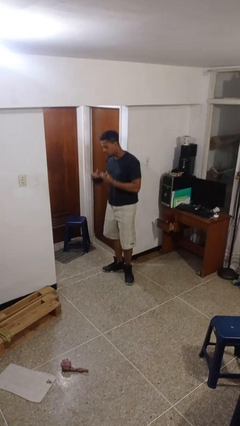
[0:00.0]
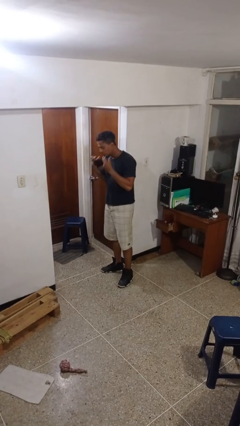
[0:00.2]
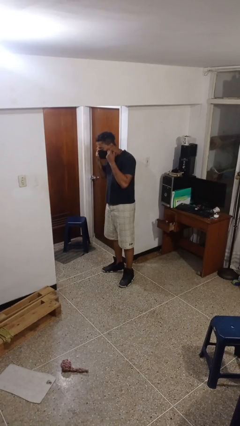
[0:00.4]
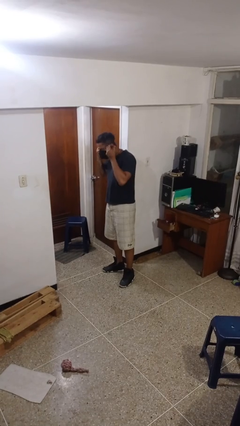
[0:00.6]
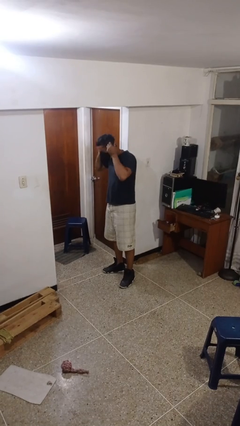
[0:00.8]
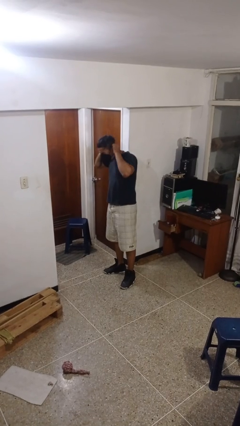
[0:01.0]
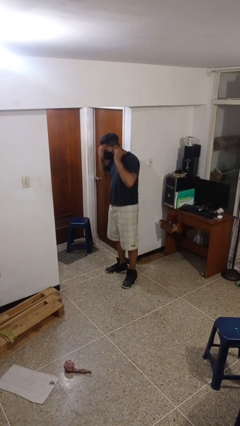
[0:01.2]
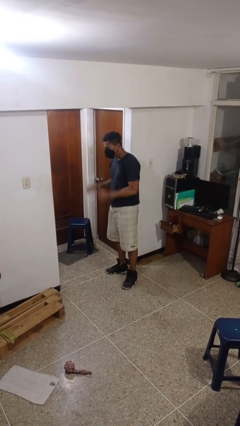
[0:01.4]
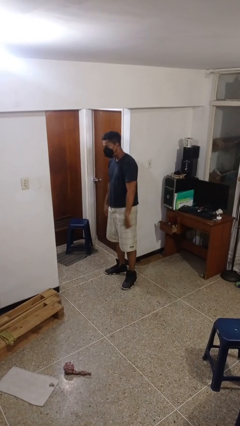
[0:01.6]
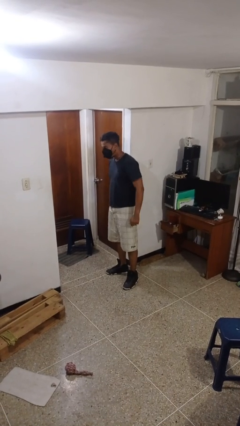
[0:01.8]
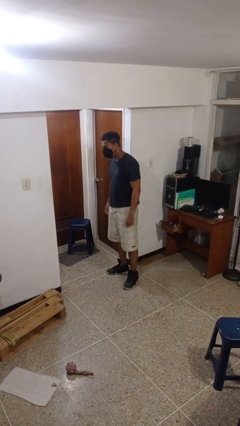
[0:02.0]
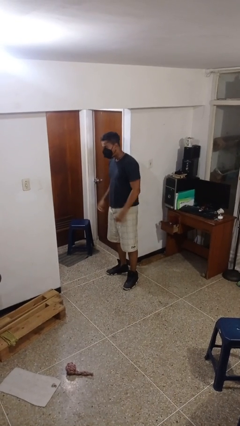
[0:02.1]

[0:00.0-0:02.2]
person puts on facemask

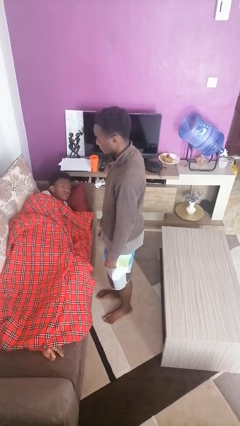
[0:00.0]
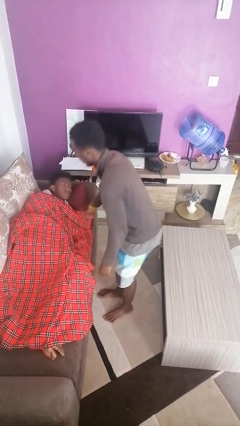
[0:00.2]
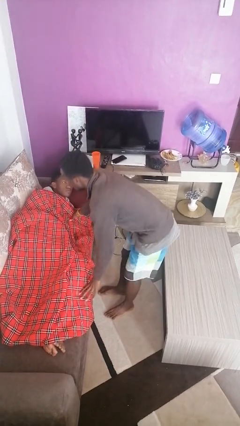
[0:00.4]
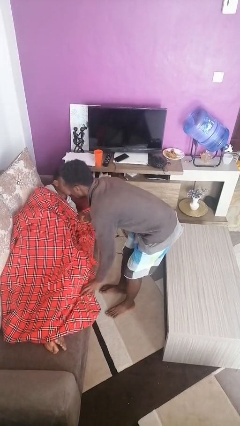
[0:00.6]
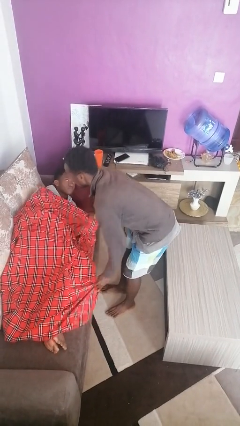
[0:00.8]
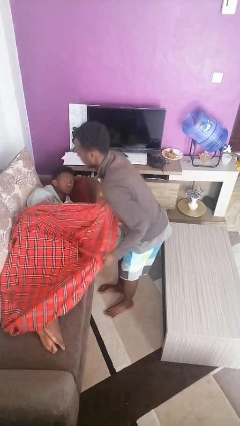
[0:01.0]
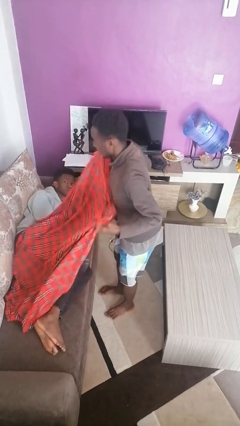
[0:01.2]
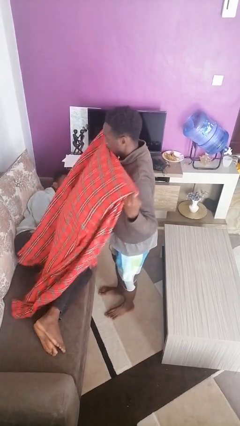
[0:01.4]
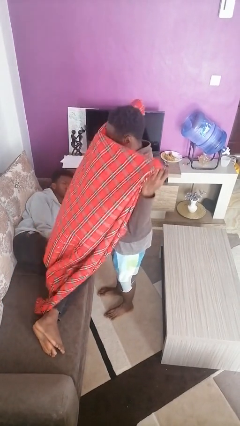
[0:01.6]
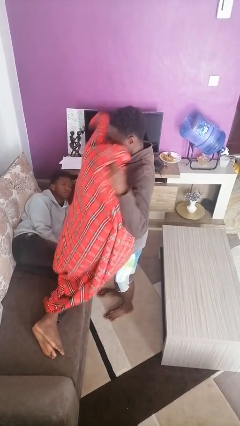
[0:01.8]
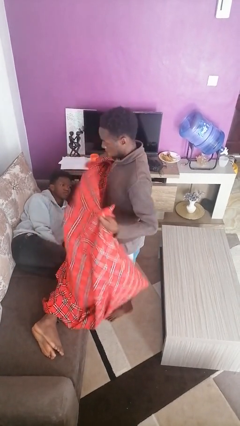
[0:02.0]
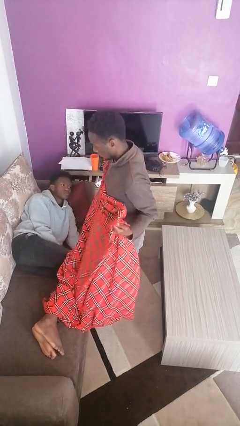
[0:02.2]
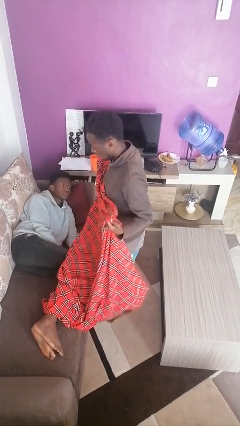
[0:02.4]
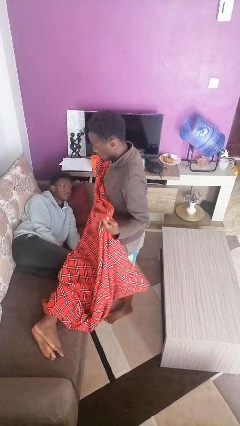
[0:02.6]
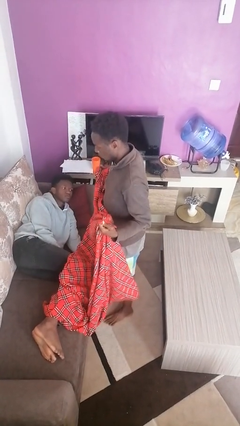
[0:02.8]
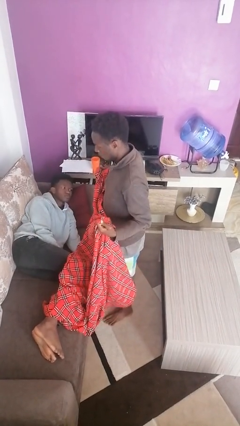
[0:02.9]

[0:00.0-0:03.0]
person uncovers friend with blanket

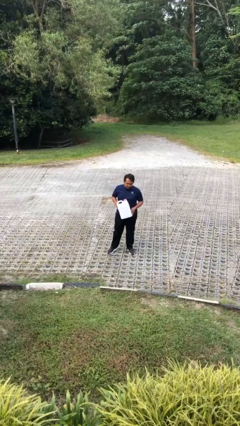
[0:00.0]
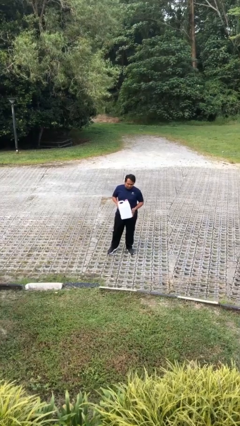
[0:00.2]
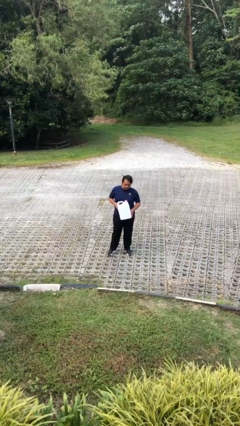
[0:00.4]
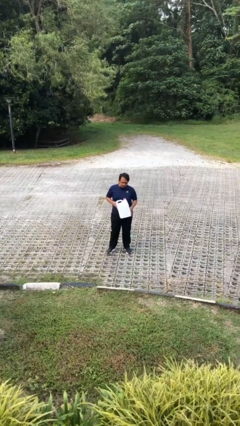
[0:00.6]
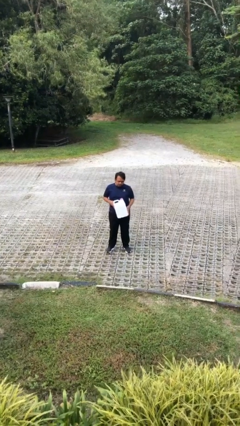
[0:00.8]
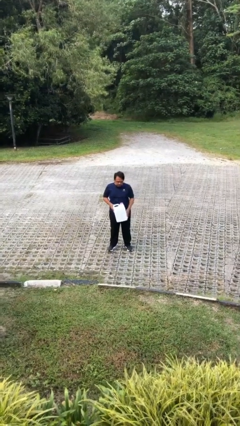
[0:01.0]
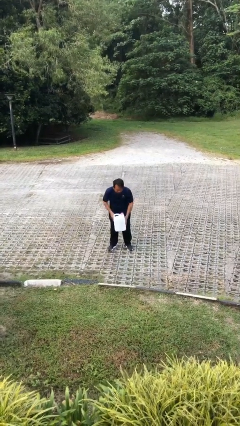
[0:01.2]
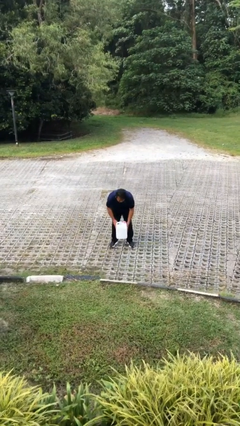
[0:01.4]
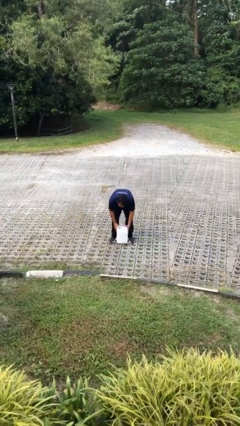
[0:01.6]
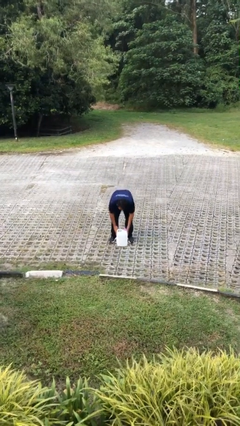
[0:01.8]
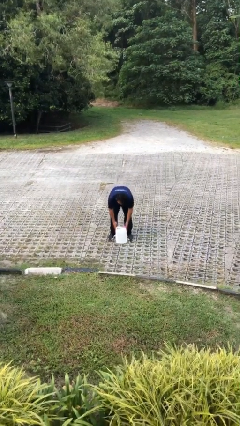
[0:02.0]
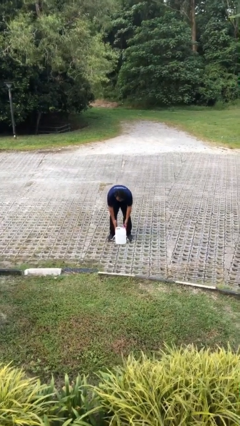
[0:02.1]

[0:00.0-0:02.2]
person puts down object on floor

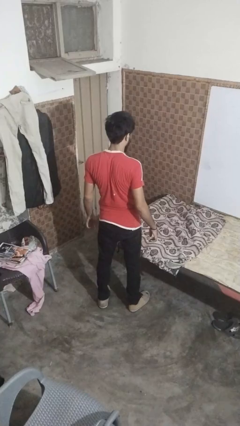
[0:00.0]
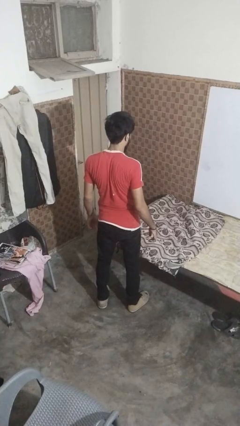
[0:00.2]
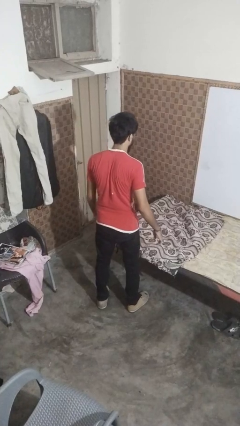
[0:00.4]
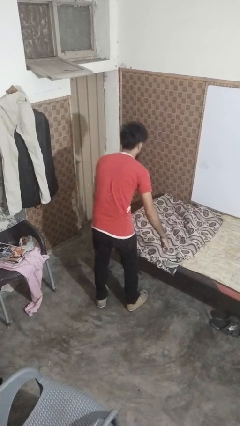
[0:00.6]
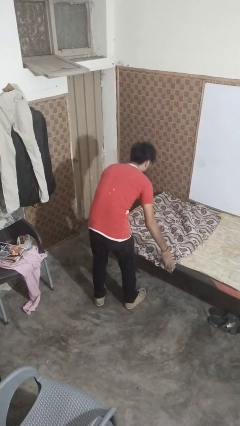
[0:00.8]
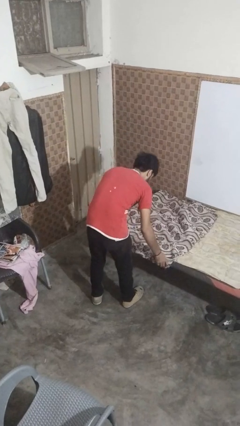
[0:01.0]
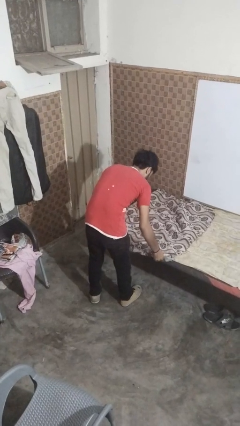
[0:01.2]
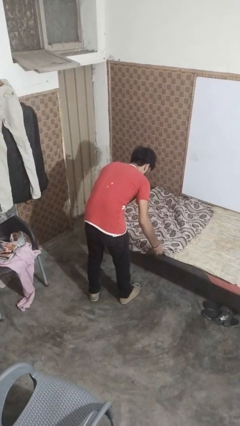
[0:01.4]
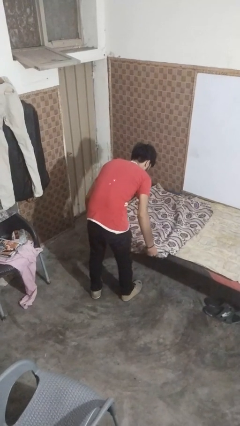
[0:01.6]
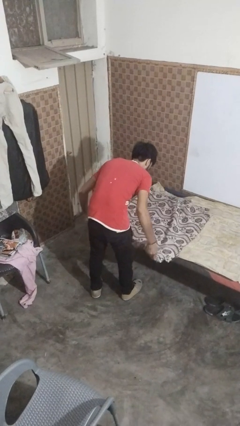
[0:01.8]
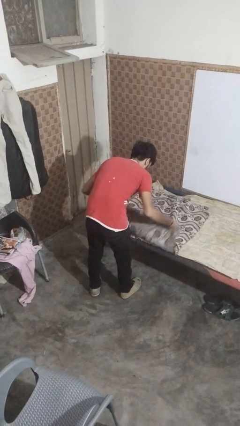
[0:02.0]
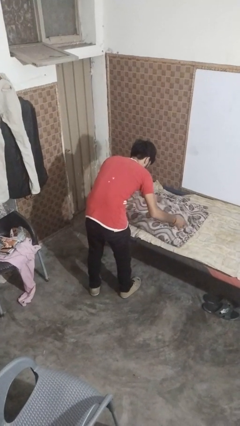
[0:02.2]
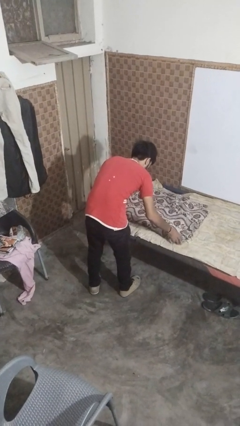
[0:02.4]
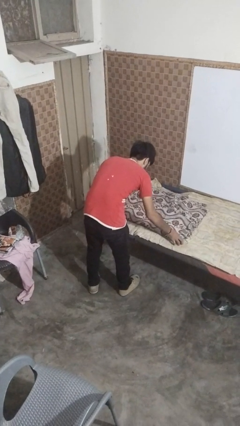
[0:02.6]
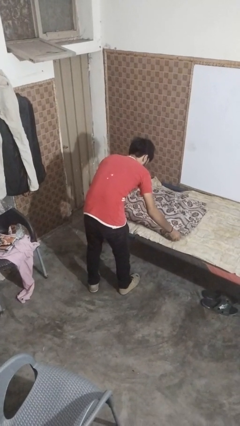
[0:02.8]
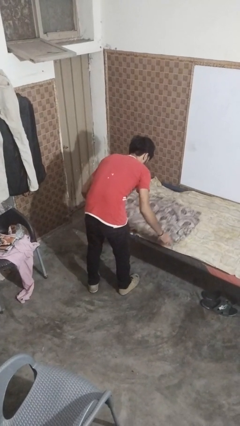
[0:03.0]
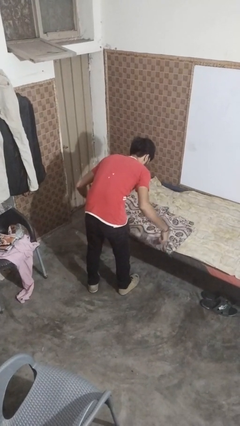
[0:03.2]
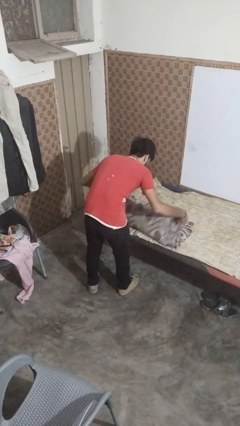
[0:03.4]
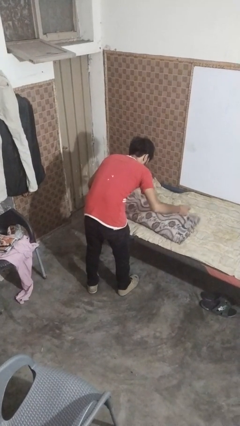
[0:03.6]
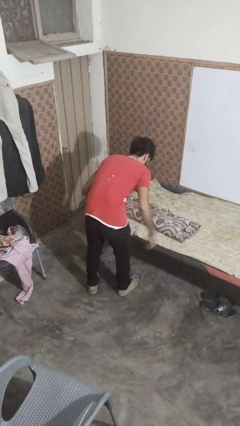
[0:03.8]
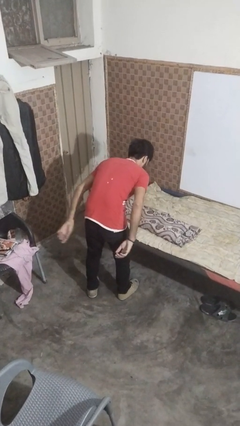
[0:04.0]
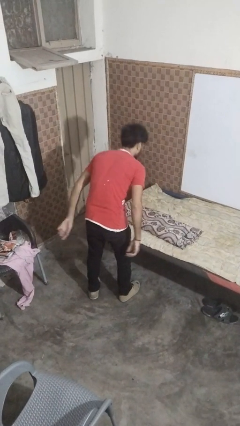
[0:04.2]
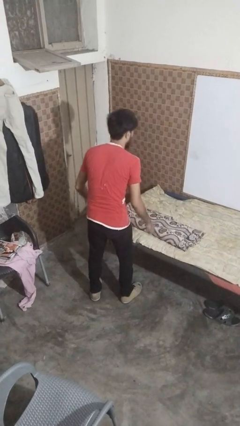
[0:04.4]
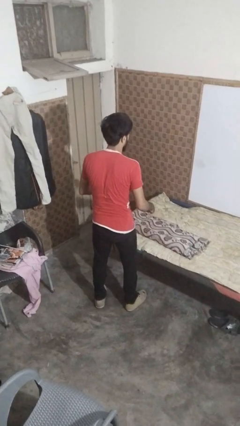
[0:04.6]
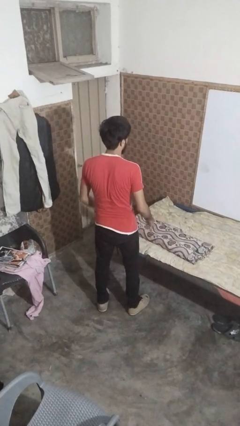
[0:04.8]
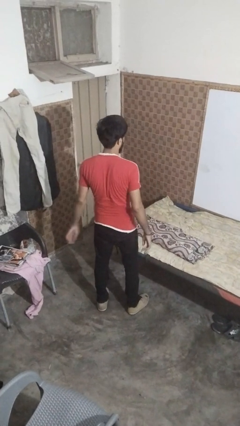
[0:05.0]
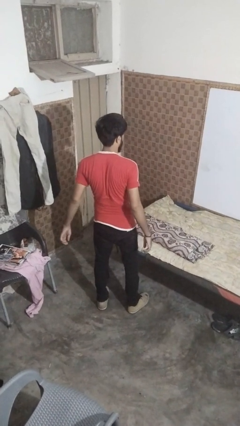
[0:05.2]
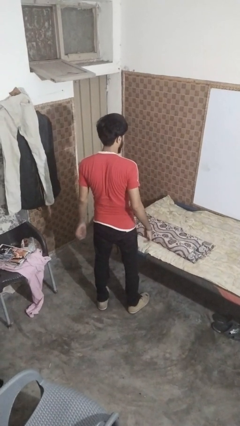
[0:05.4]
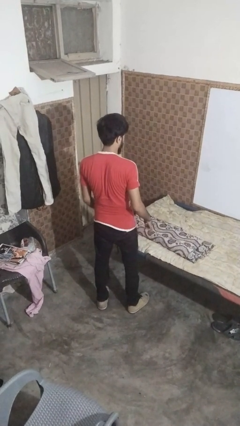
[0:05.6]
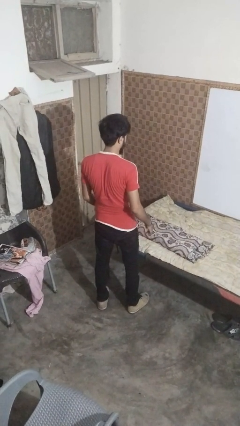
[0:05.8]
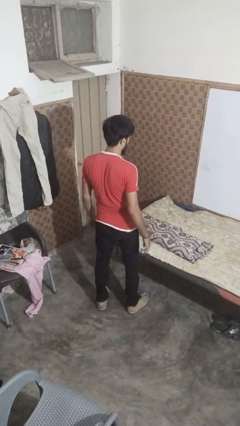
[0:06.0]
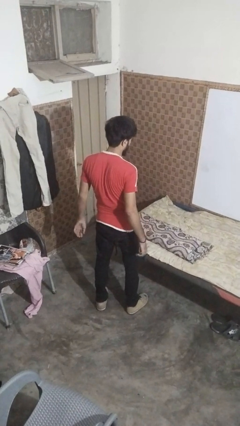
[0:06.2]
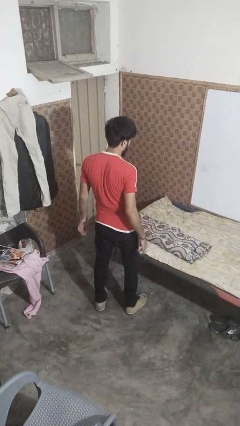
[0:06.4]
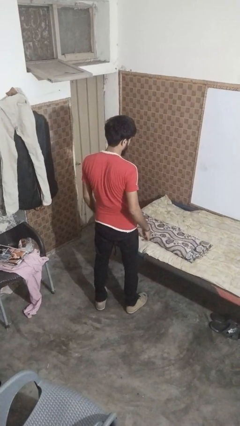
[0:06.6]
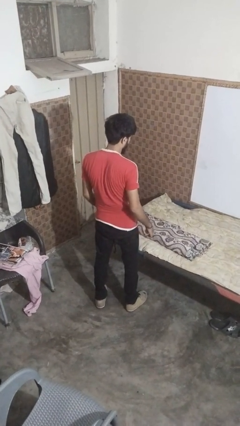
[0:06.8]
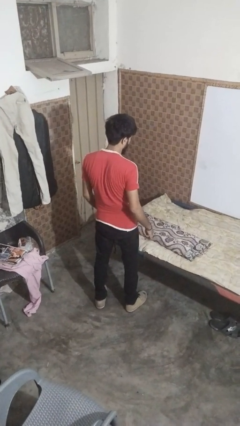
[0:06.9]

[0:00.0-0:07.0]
person folds blanket

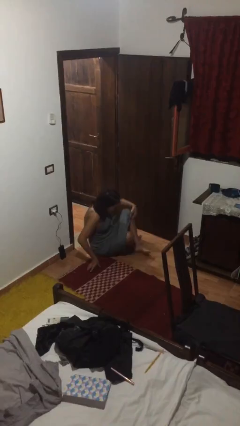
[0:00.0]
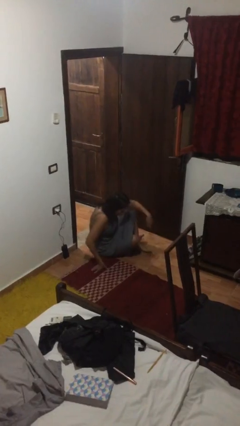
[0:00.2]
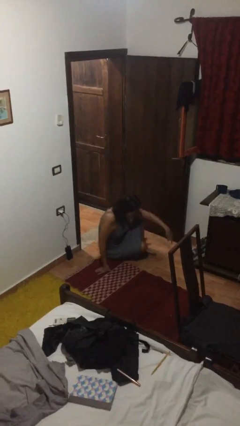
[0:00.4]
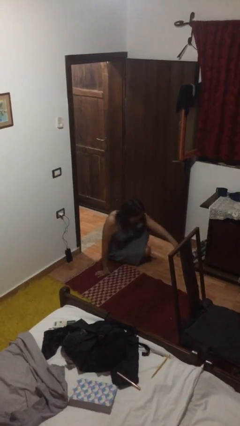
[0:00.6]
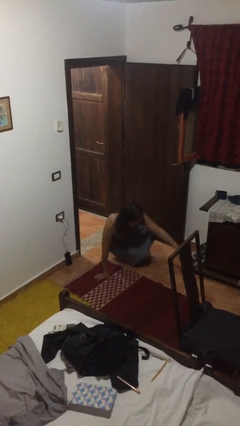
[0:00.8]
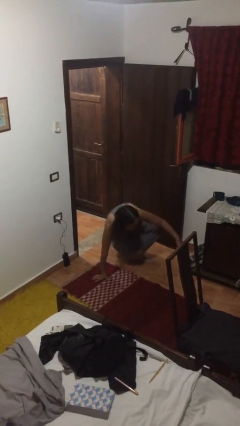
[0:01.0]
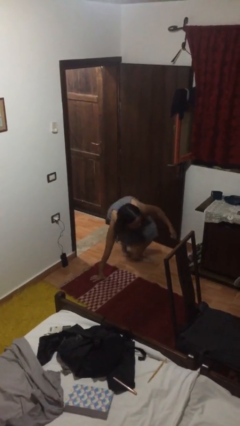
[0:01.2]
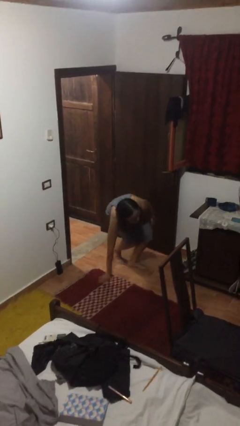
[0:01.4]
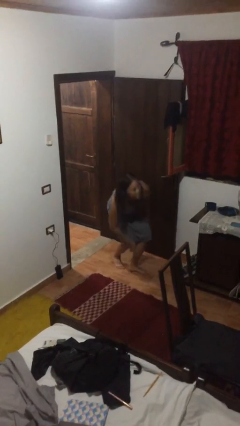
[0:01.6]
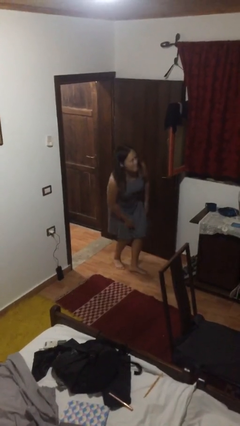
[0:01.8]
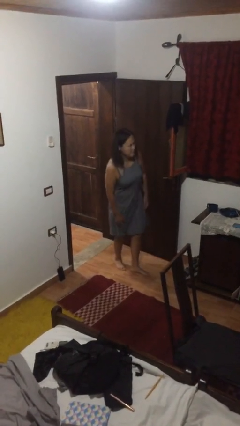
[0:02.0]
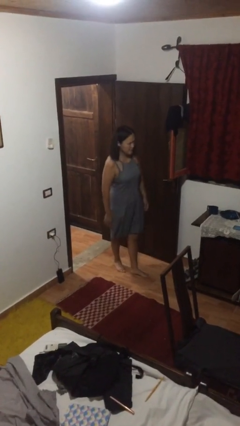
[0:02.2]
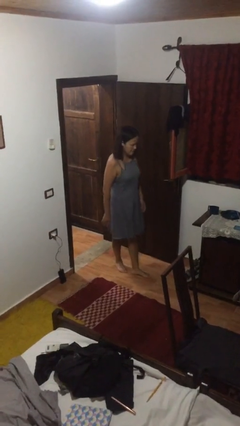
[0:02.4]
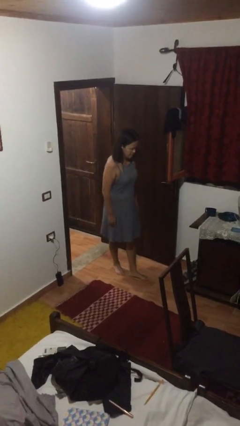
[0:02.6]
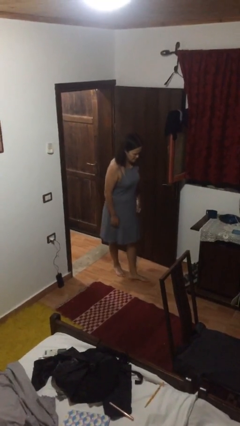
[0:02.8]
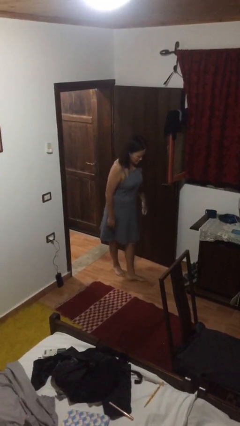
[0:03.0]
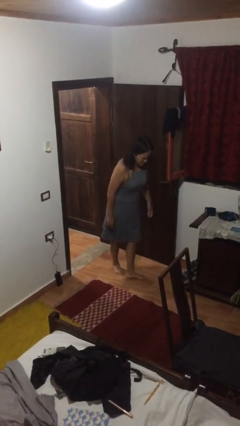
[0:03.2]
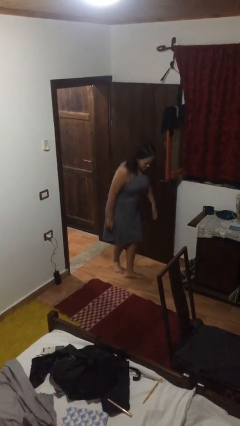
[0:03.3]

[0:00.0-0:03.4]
person stands up from floor
